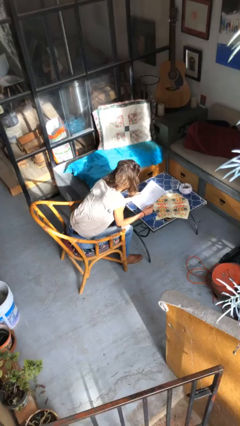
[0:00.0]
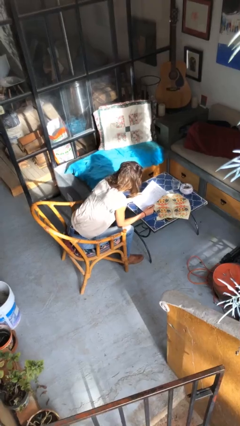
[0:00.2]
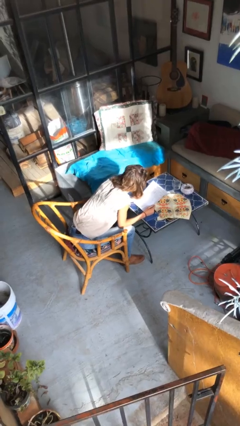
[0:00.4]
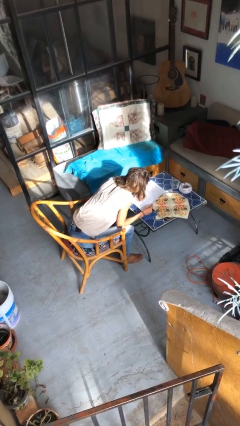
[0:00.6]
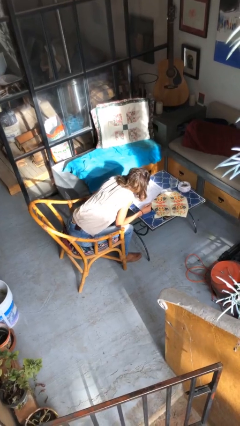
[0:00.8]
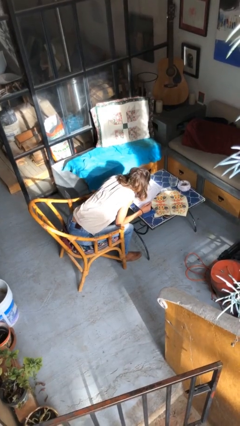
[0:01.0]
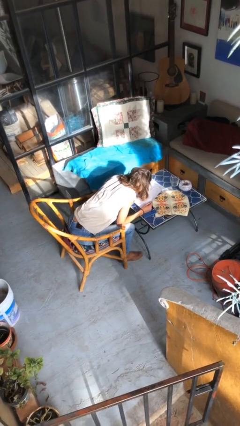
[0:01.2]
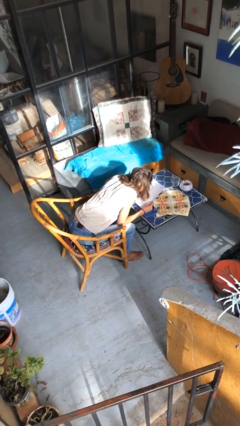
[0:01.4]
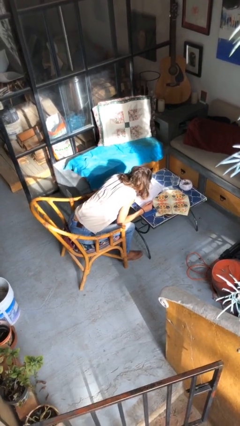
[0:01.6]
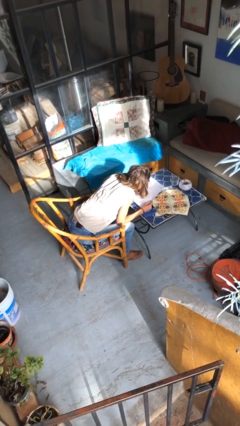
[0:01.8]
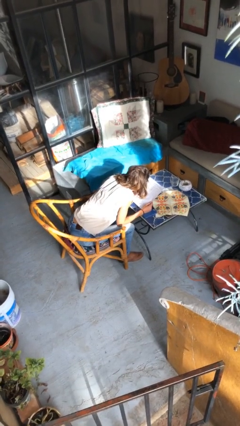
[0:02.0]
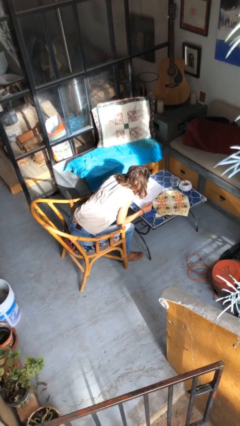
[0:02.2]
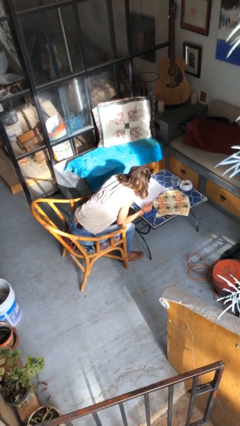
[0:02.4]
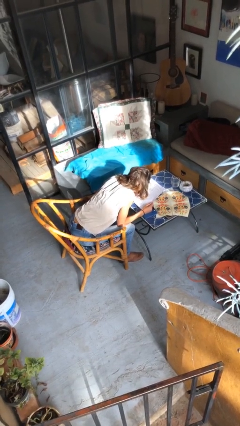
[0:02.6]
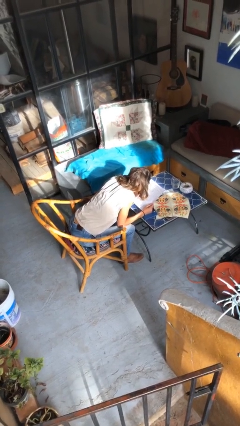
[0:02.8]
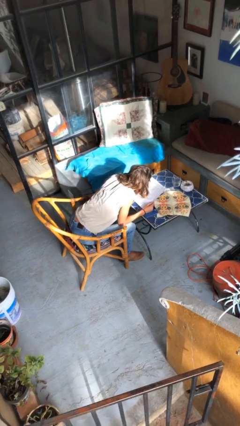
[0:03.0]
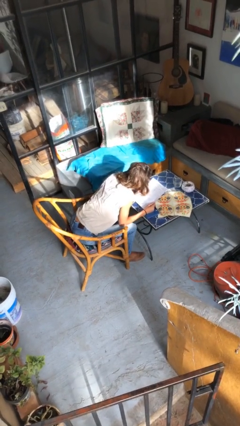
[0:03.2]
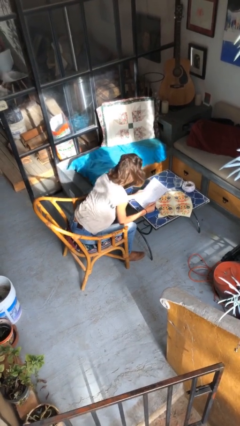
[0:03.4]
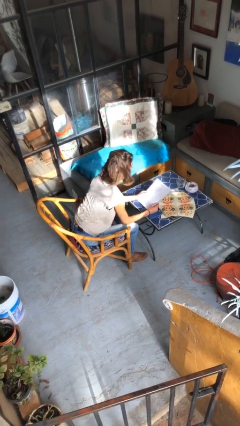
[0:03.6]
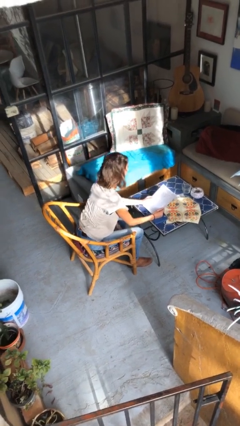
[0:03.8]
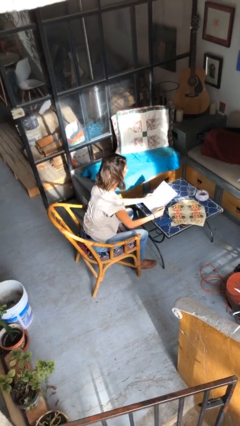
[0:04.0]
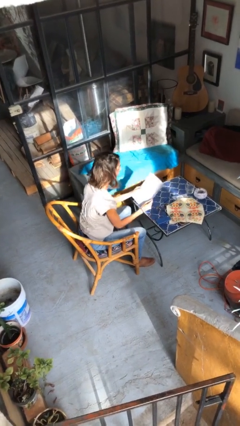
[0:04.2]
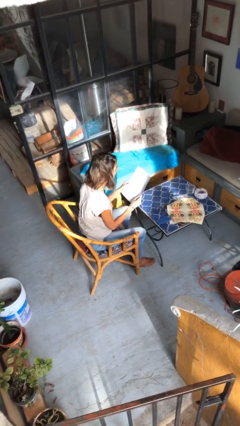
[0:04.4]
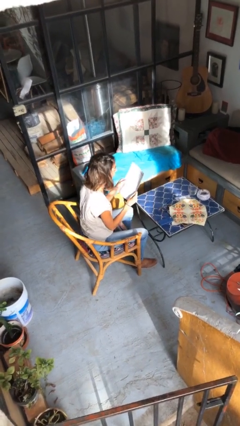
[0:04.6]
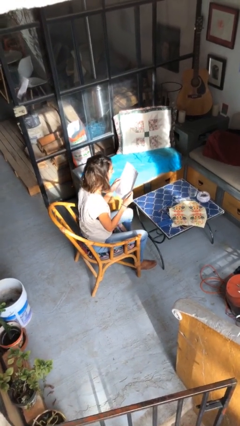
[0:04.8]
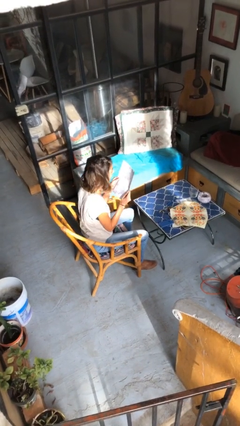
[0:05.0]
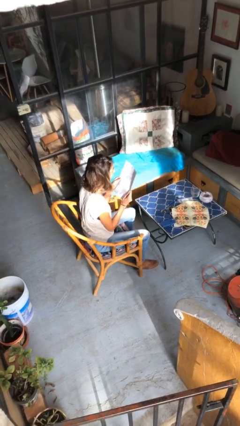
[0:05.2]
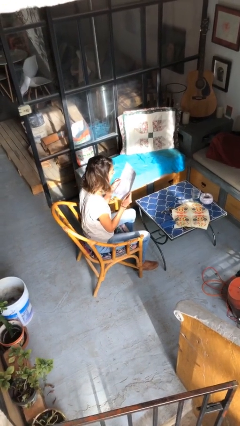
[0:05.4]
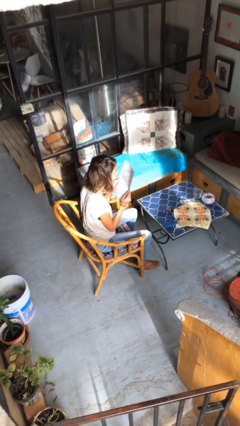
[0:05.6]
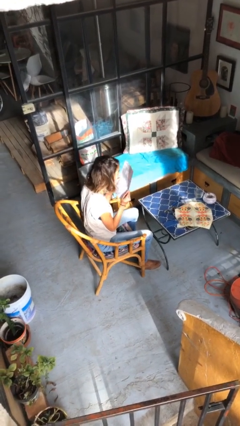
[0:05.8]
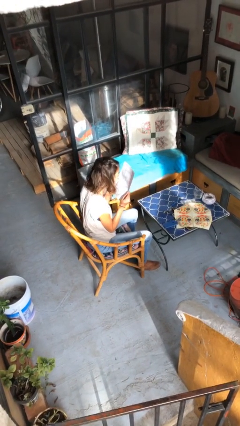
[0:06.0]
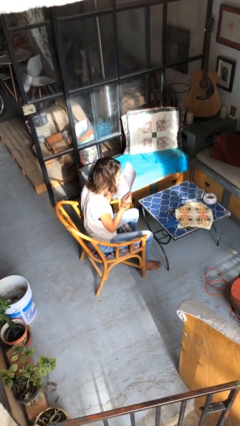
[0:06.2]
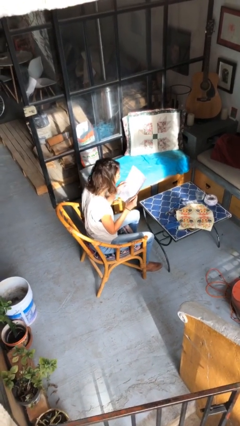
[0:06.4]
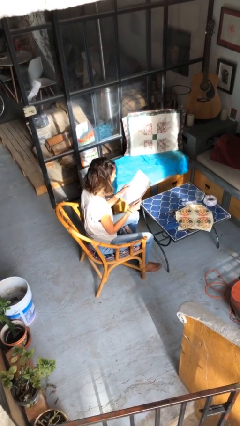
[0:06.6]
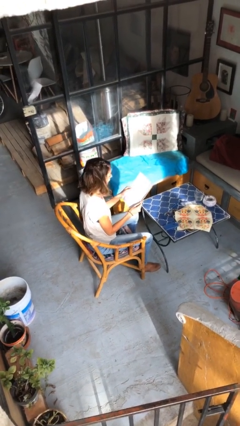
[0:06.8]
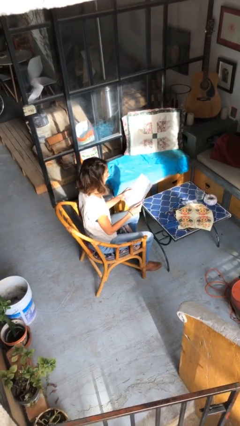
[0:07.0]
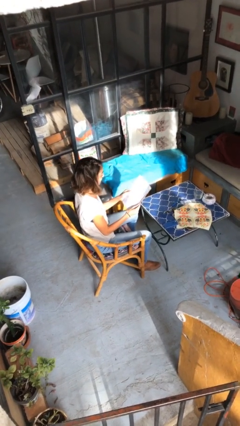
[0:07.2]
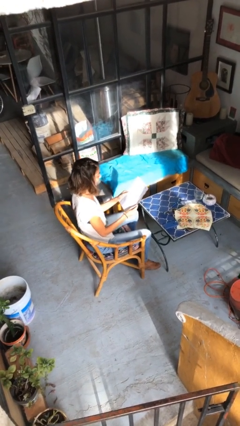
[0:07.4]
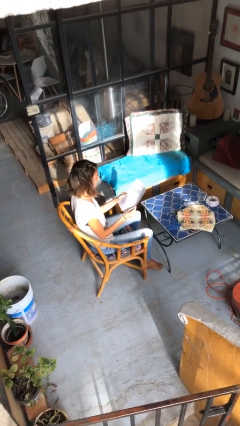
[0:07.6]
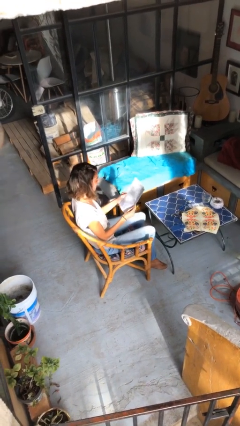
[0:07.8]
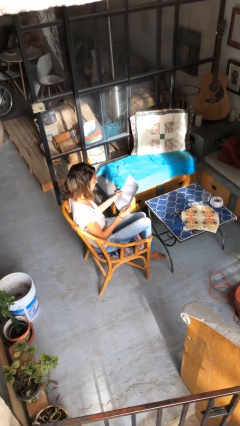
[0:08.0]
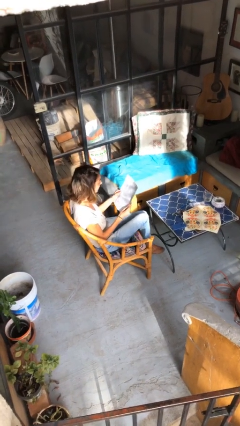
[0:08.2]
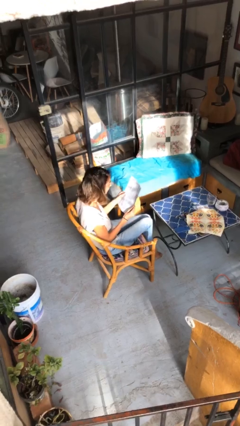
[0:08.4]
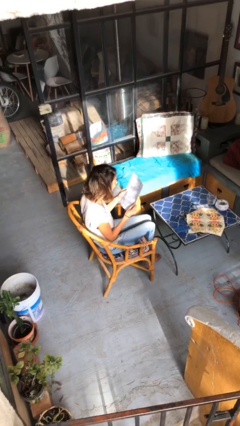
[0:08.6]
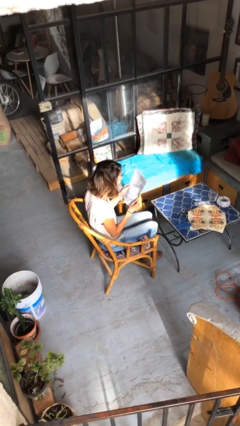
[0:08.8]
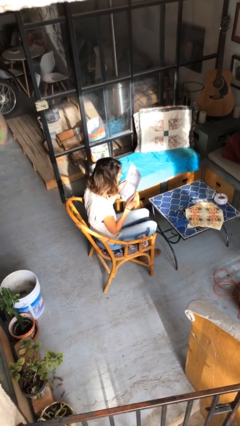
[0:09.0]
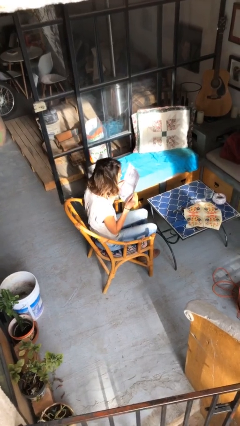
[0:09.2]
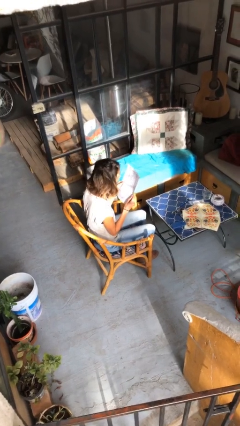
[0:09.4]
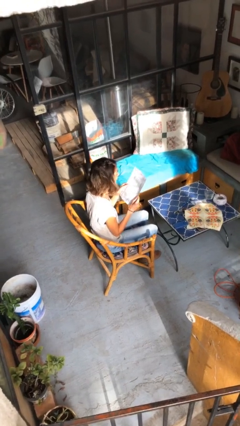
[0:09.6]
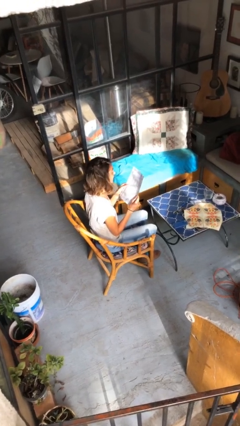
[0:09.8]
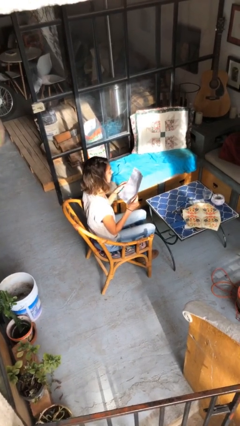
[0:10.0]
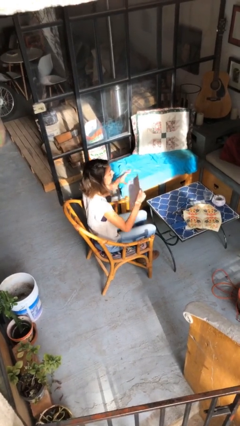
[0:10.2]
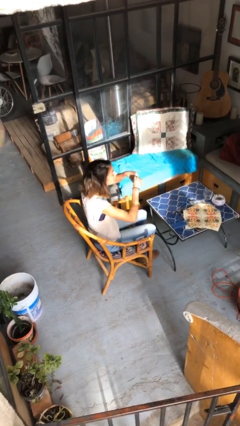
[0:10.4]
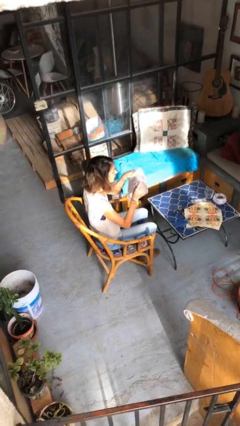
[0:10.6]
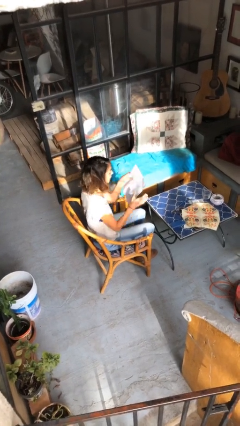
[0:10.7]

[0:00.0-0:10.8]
person reads document

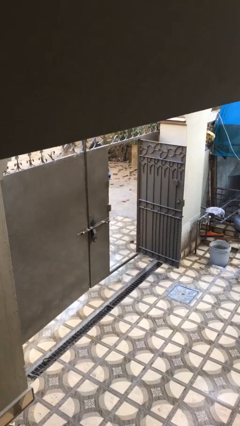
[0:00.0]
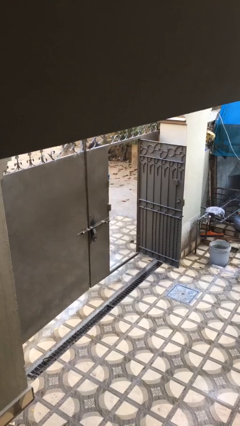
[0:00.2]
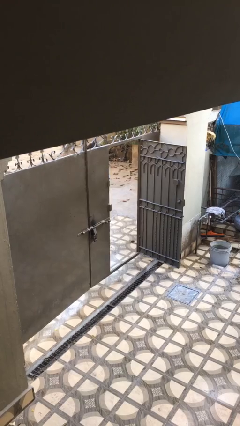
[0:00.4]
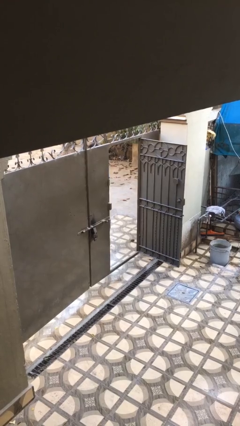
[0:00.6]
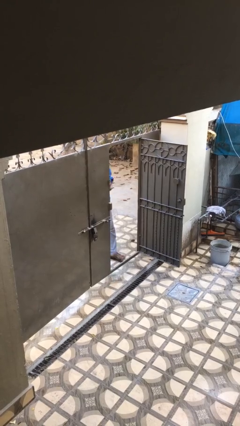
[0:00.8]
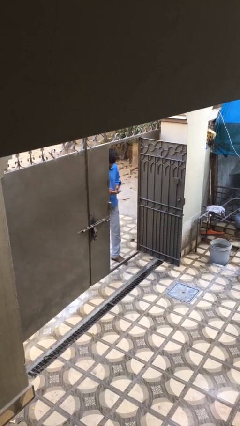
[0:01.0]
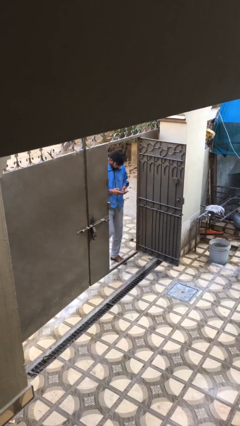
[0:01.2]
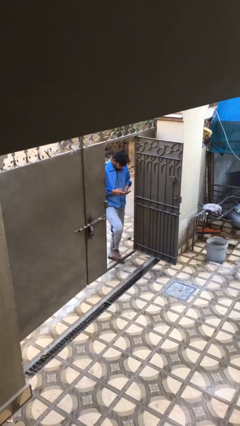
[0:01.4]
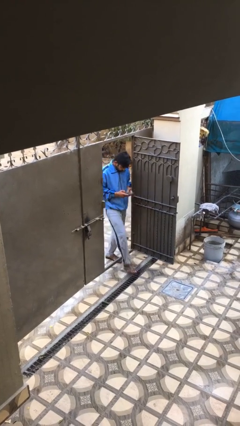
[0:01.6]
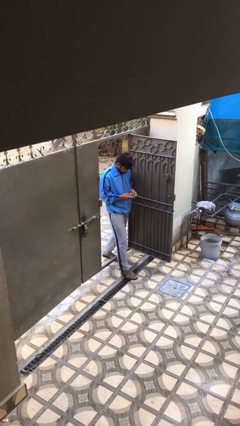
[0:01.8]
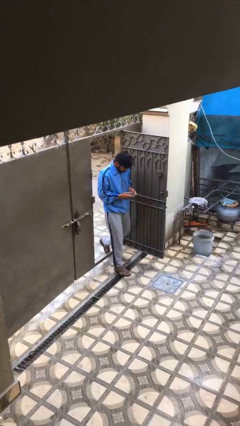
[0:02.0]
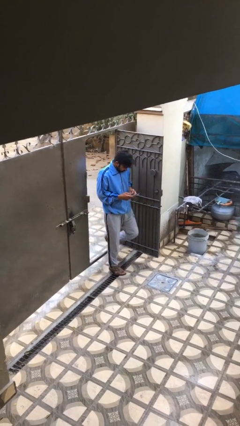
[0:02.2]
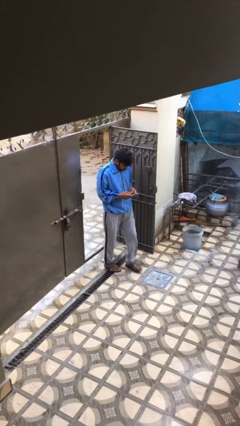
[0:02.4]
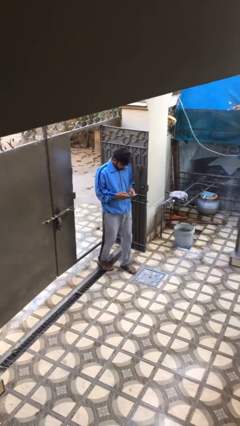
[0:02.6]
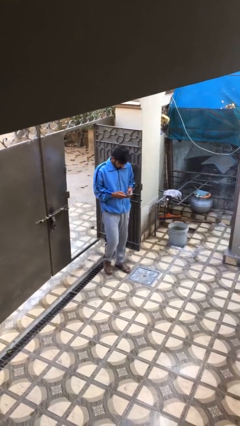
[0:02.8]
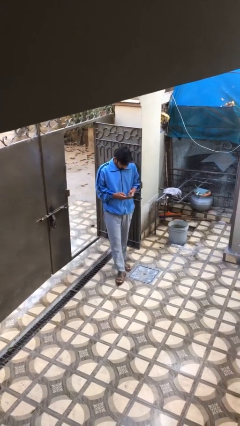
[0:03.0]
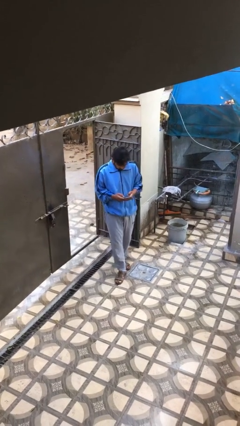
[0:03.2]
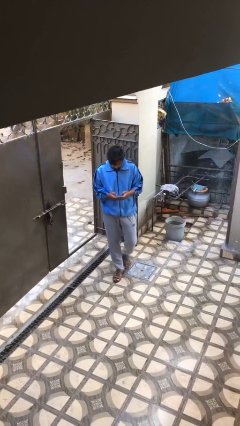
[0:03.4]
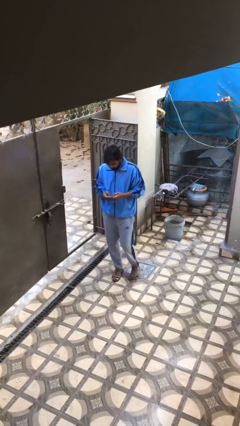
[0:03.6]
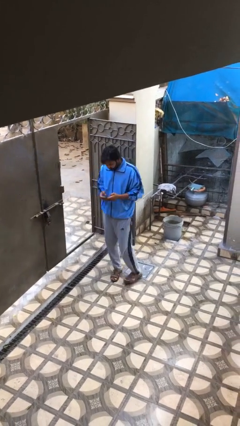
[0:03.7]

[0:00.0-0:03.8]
person enters scene through structure

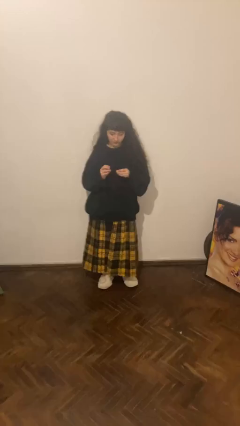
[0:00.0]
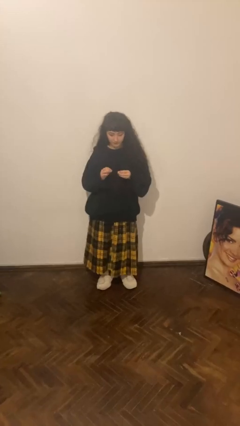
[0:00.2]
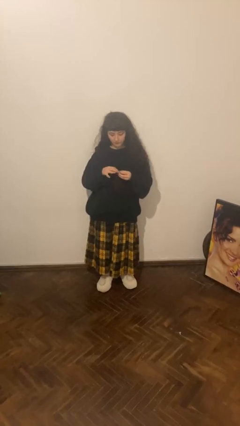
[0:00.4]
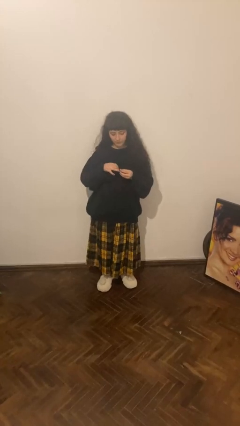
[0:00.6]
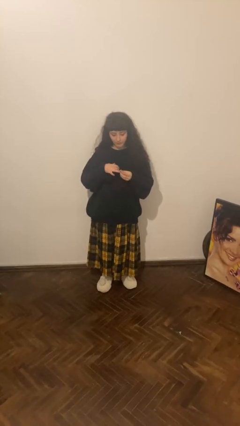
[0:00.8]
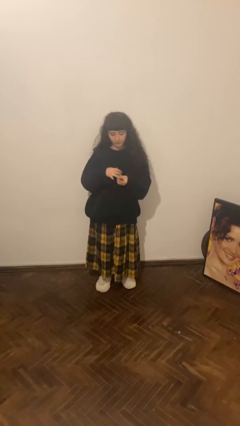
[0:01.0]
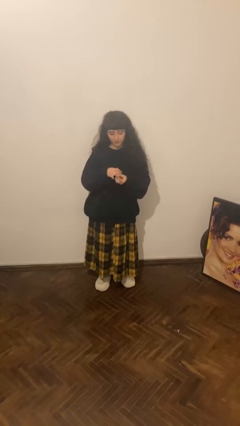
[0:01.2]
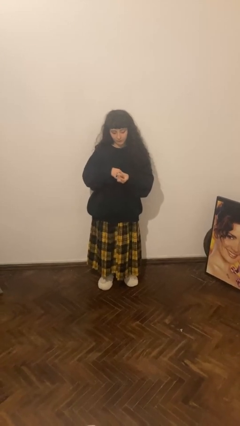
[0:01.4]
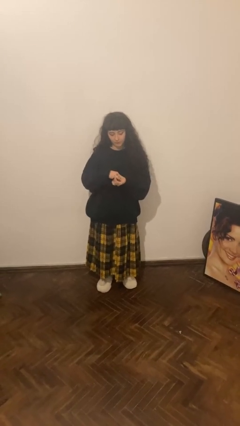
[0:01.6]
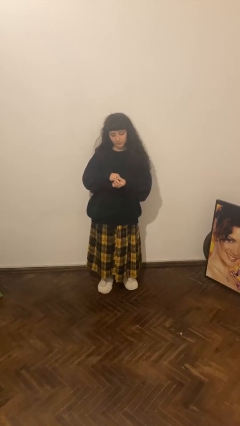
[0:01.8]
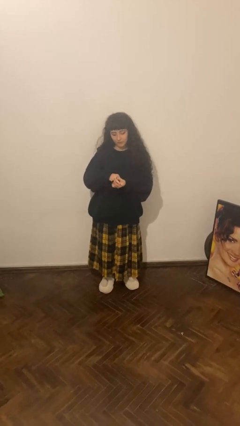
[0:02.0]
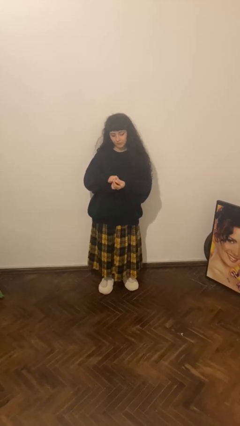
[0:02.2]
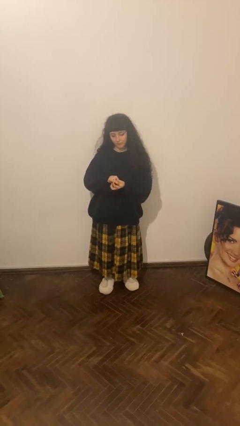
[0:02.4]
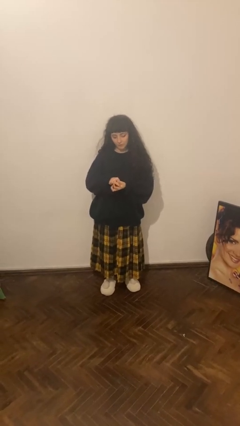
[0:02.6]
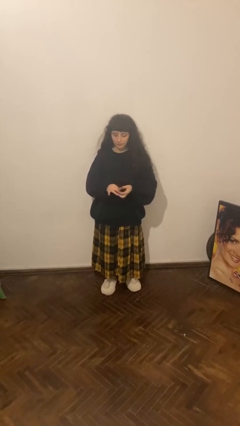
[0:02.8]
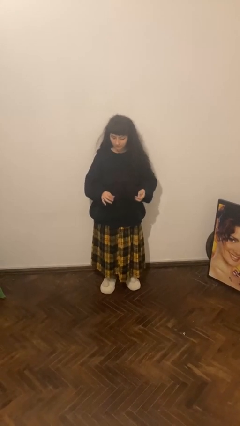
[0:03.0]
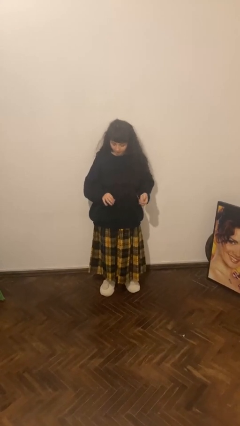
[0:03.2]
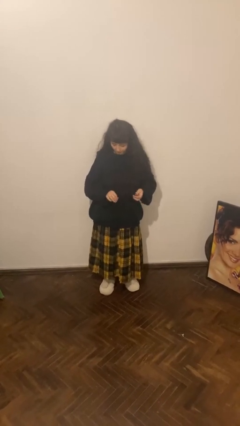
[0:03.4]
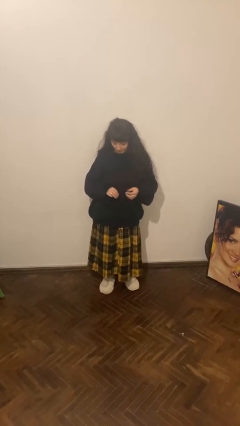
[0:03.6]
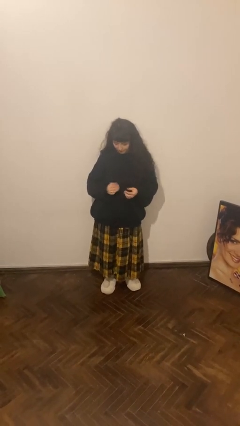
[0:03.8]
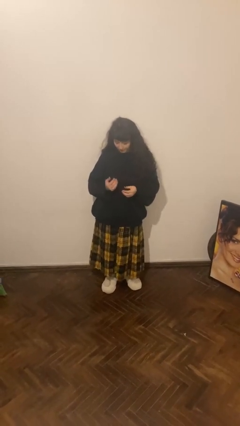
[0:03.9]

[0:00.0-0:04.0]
person puts on ring
